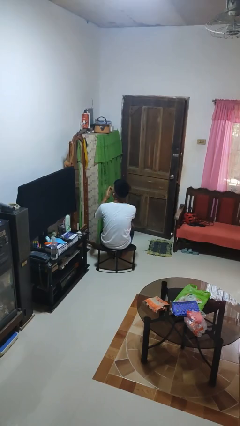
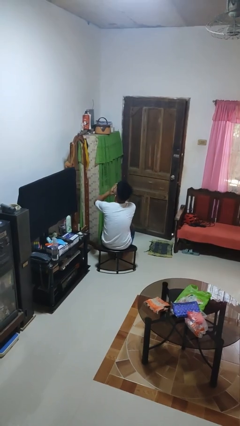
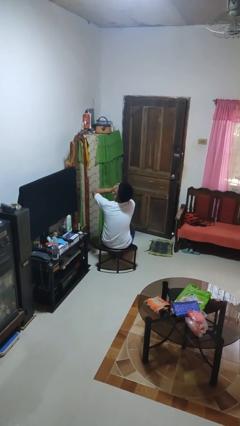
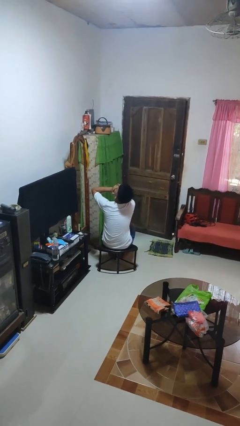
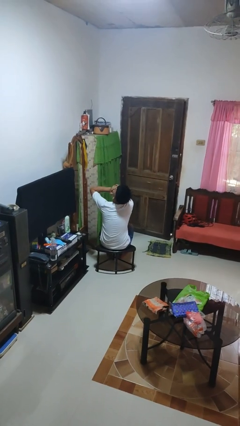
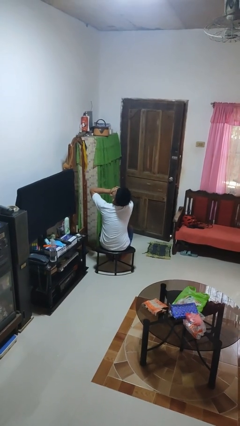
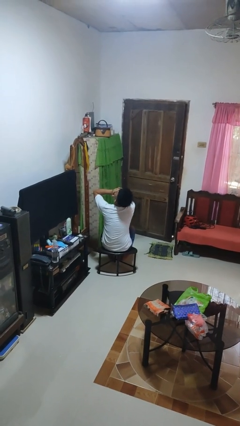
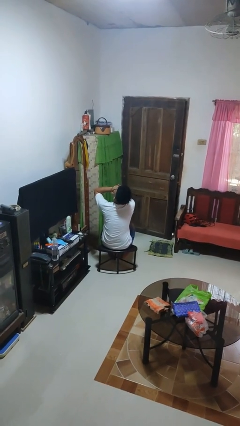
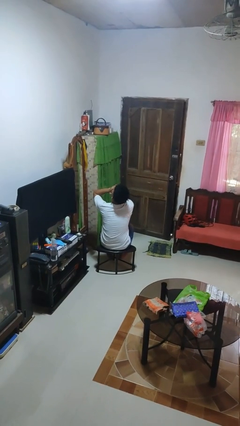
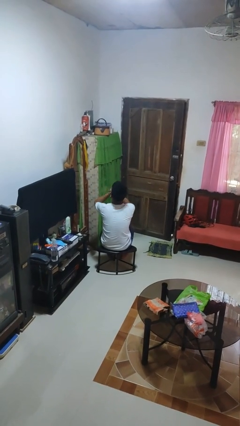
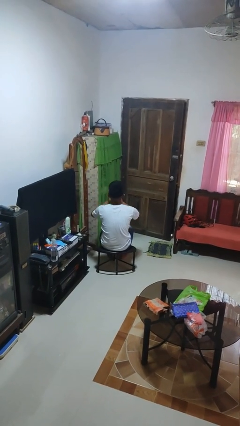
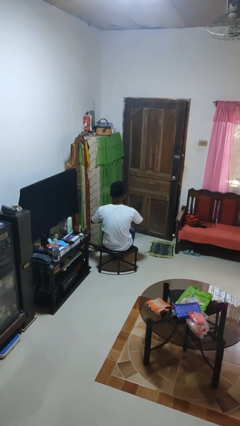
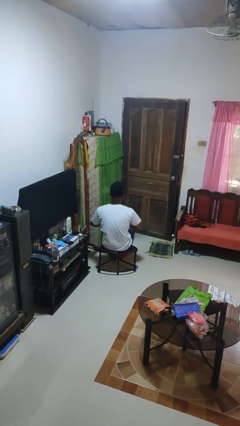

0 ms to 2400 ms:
person yawns

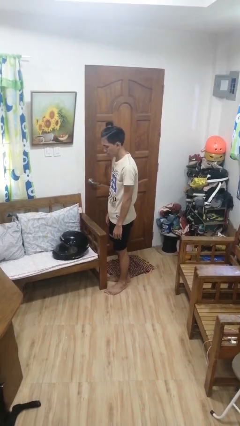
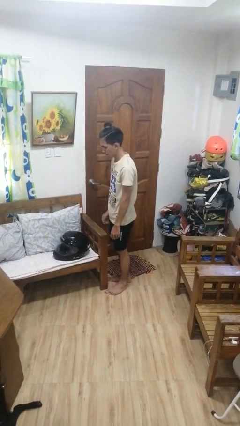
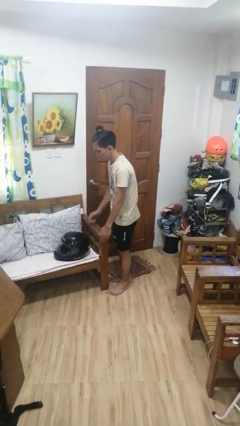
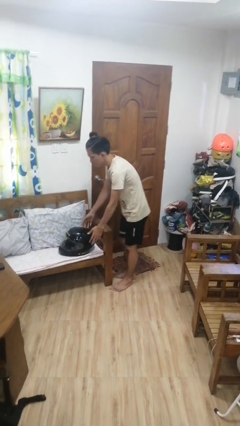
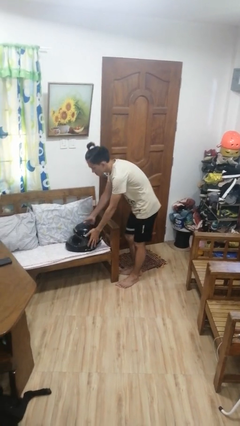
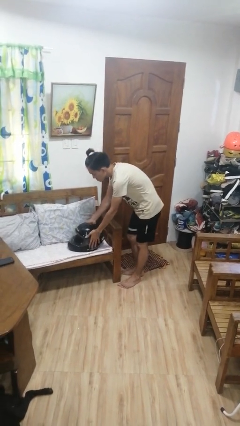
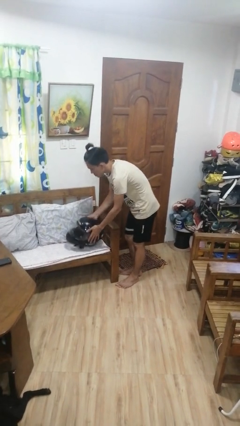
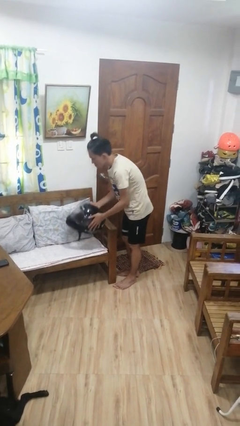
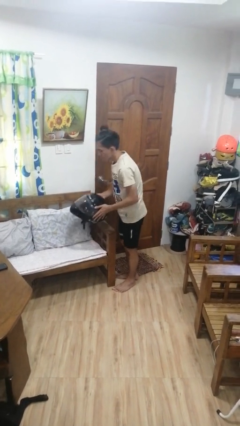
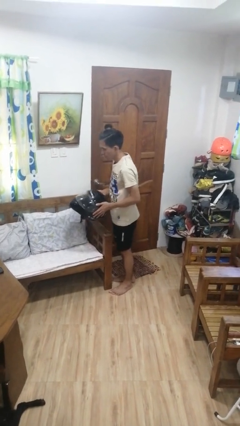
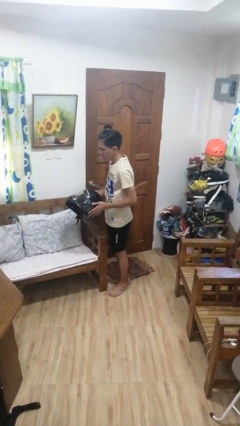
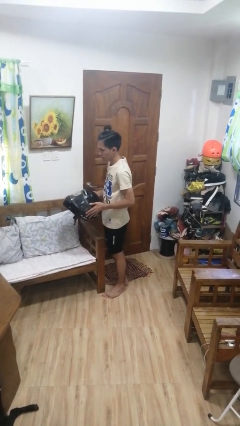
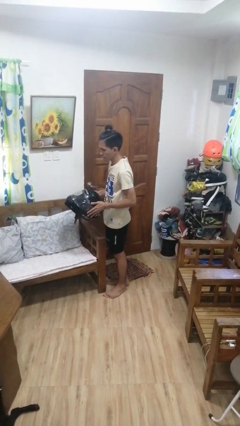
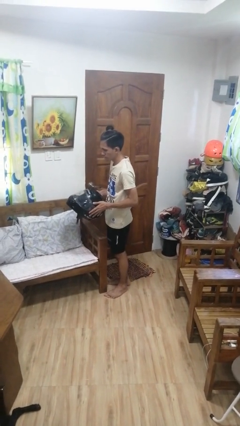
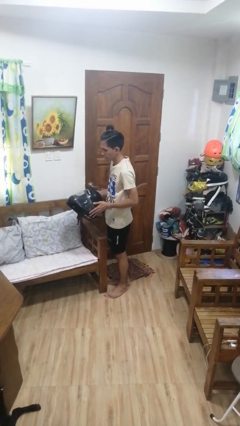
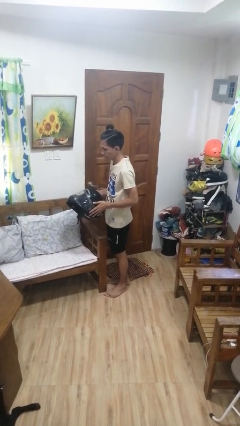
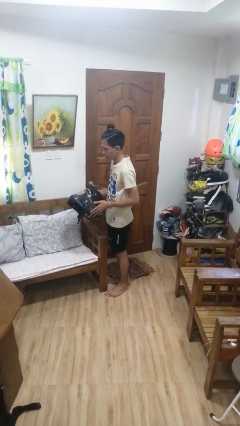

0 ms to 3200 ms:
person picks up object from couch

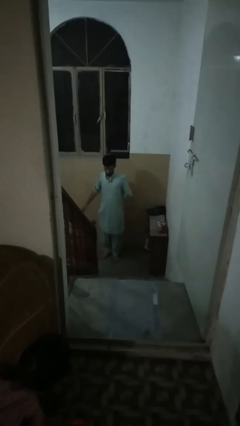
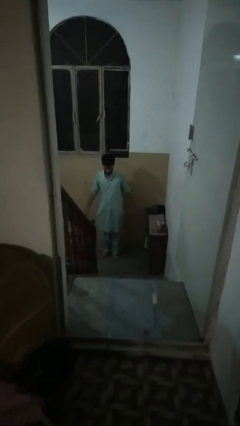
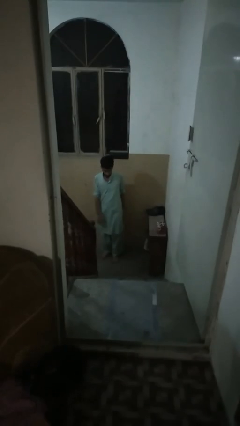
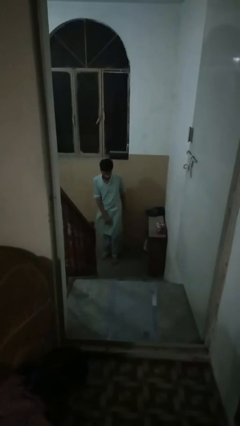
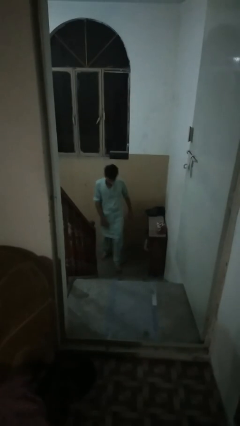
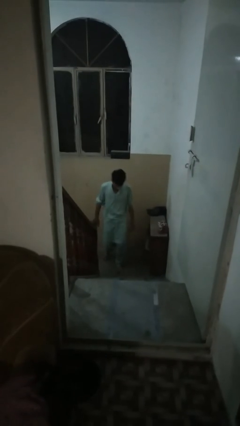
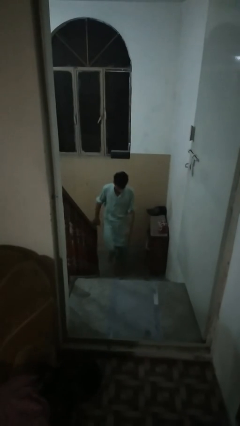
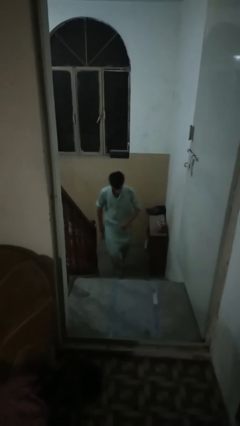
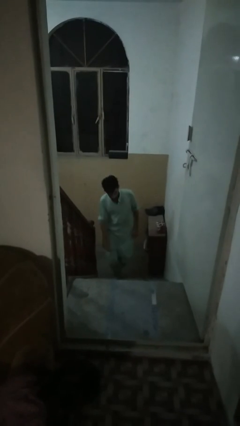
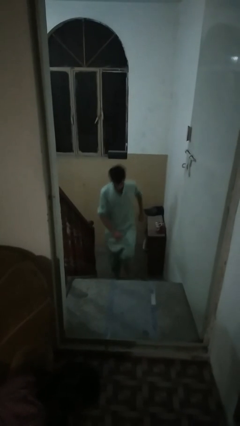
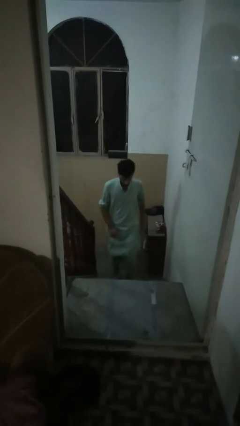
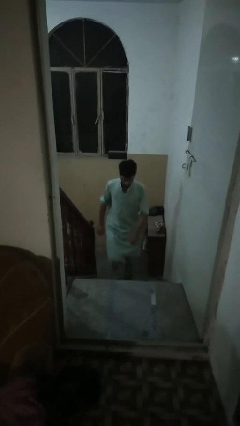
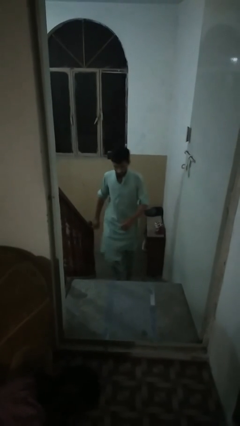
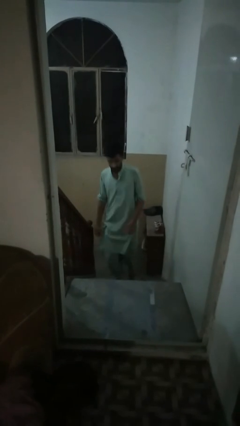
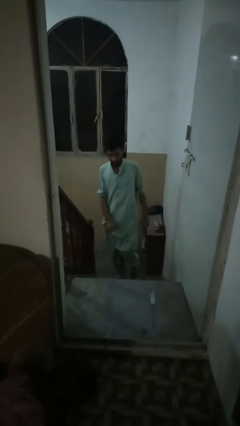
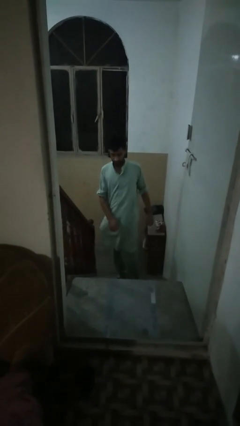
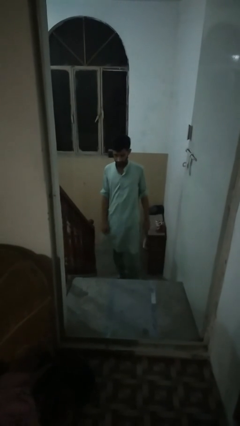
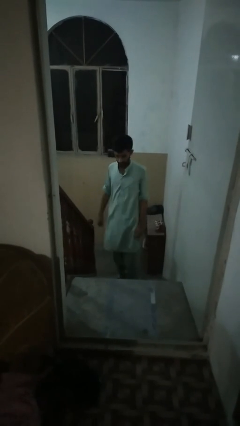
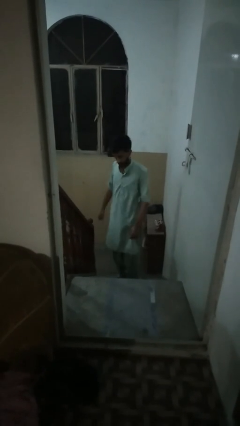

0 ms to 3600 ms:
person climbs up stairs

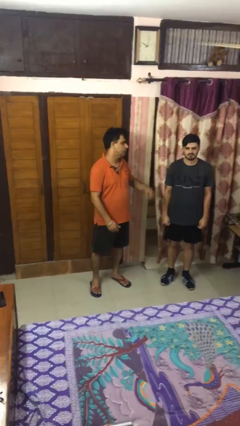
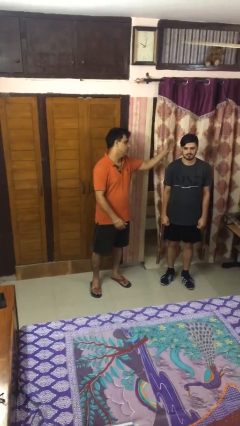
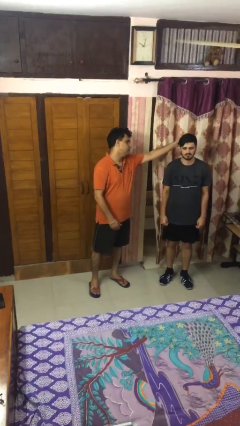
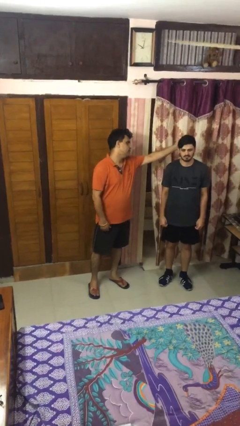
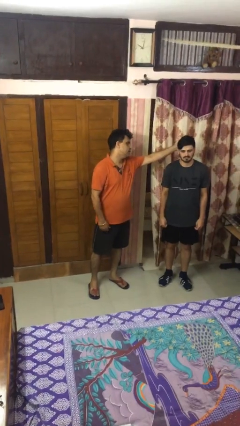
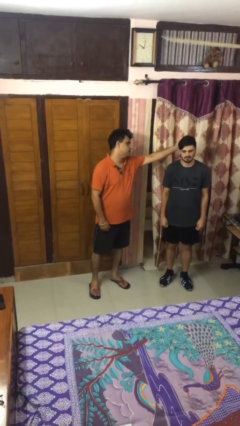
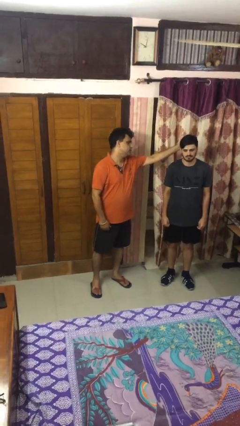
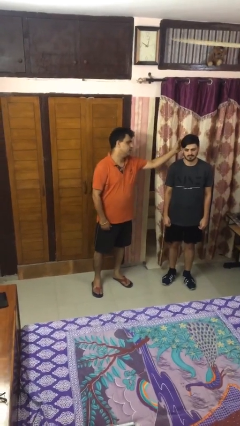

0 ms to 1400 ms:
person grabs person by hair

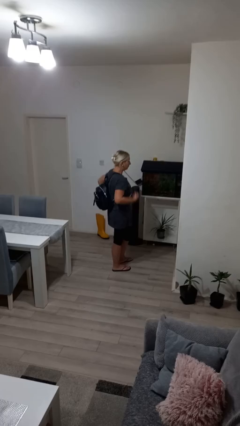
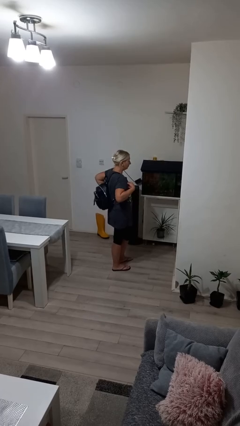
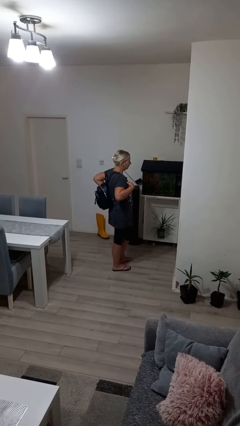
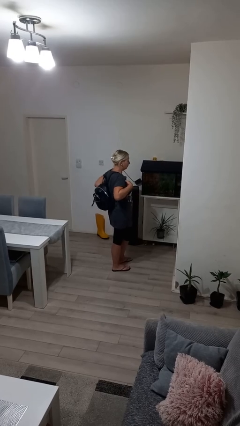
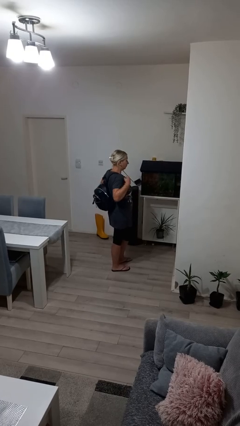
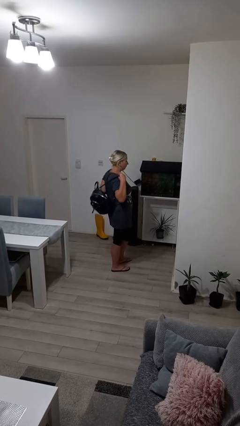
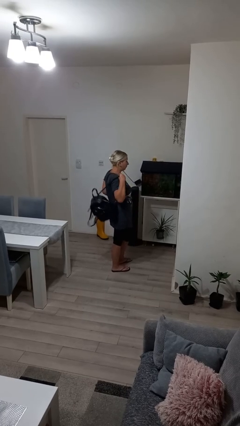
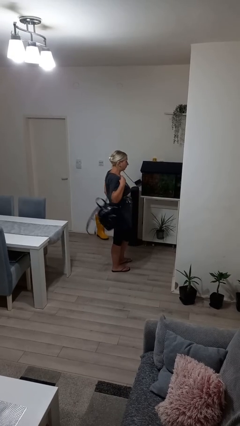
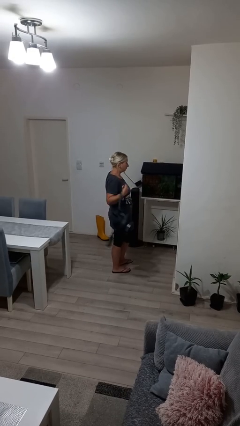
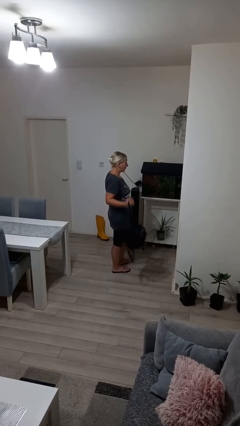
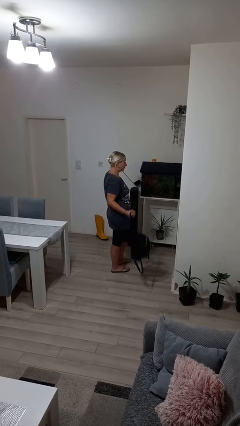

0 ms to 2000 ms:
person takes off backpack

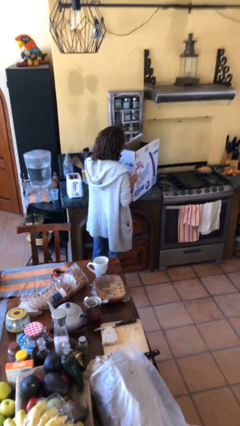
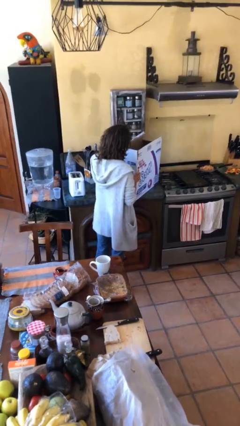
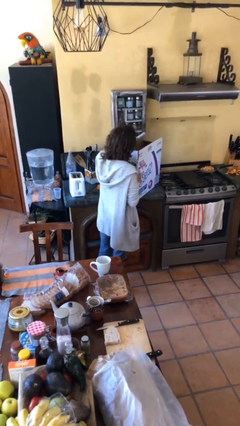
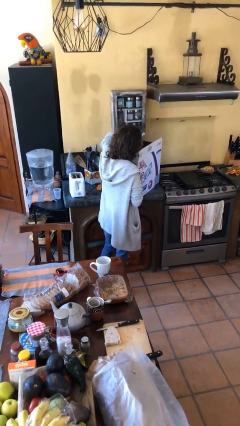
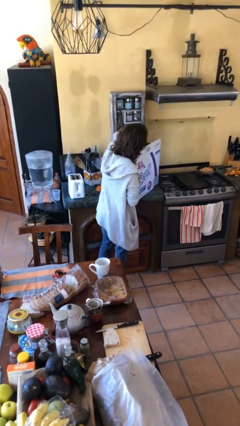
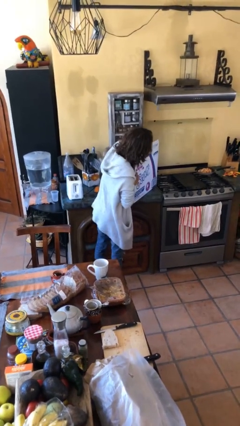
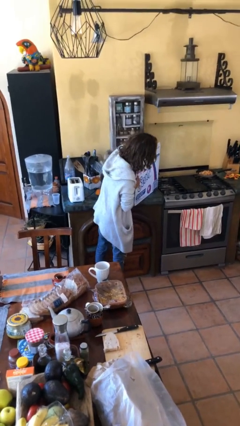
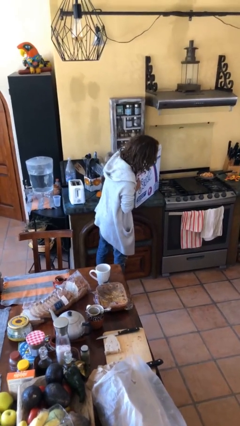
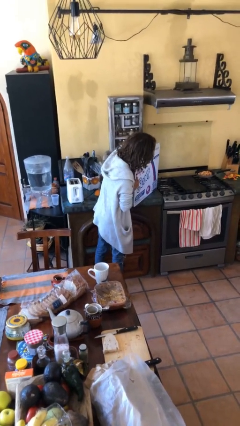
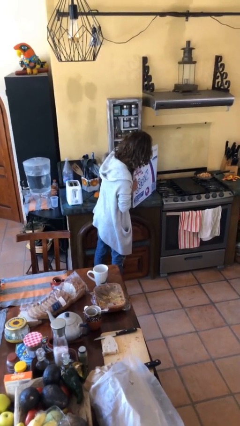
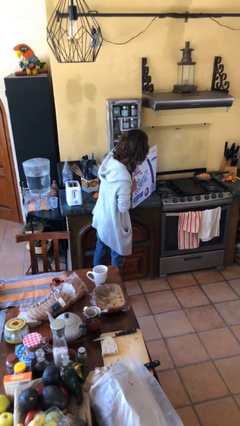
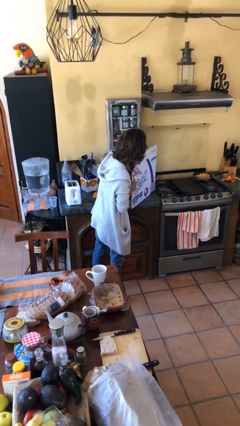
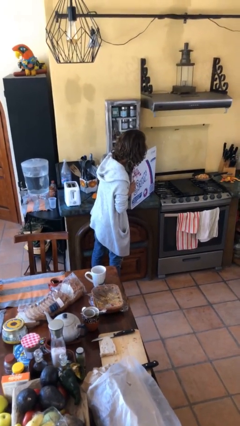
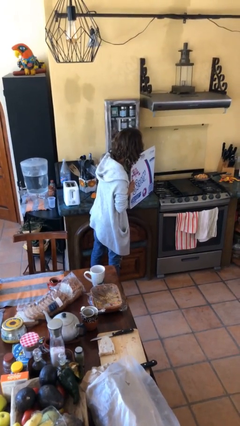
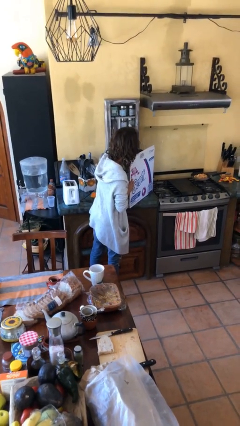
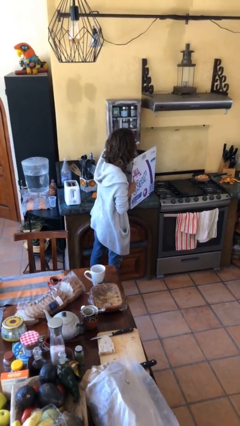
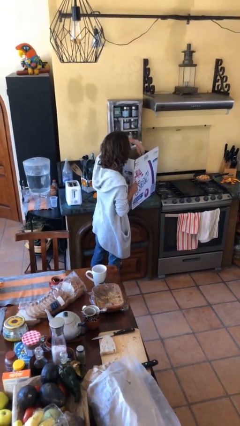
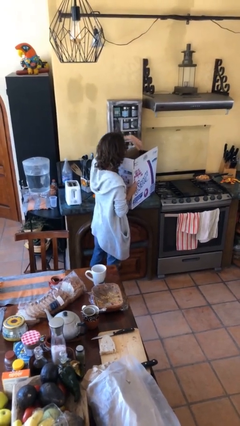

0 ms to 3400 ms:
person searches in box

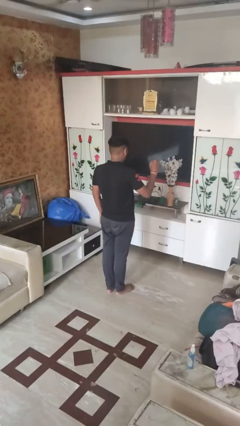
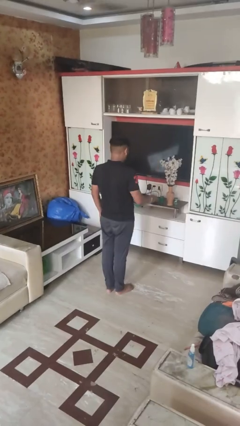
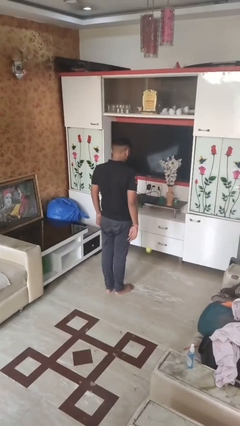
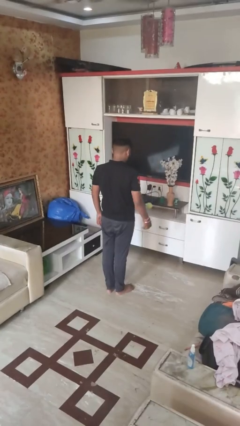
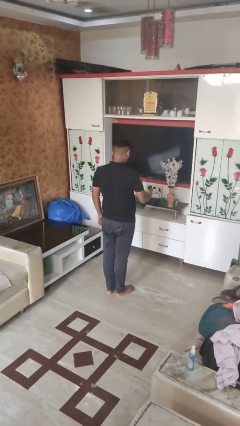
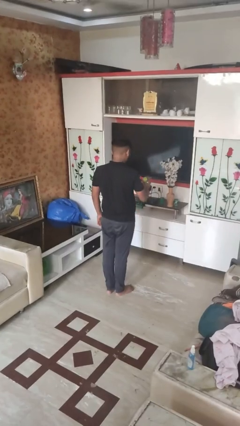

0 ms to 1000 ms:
person bounces ball on floor
